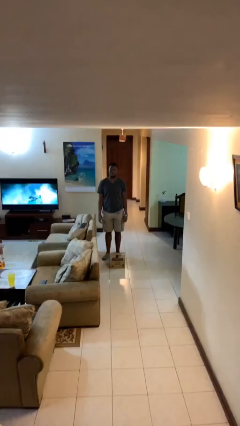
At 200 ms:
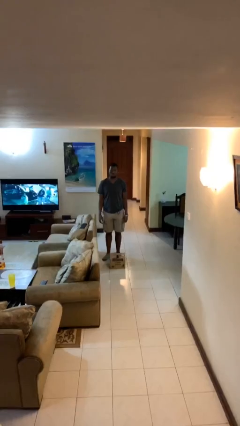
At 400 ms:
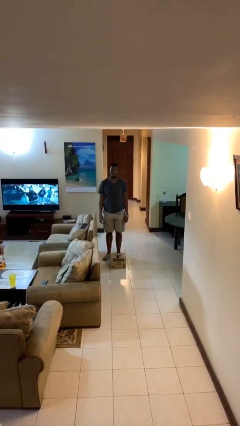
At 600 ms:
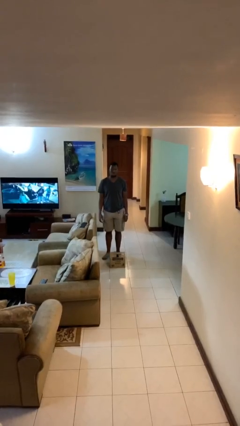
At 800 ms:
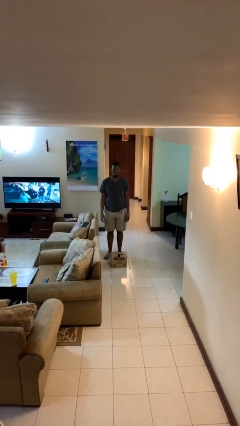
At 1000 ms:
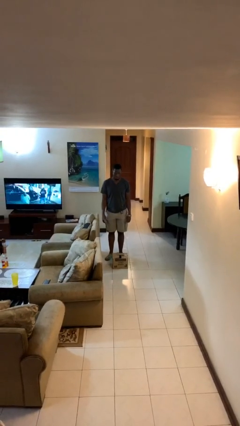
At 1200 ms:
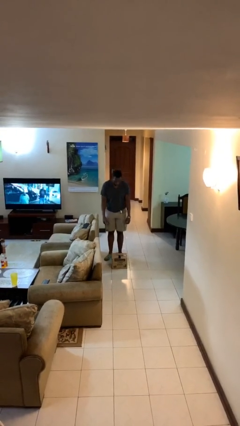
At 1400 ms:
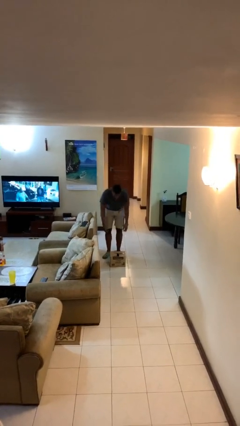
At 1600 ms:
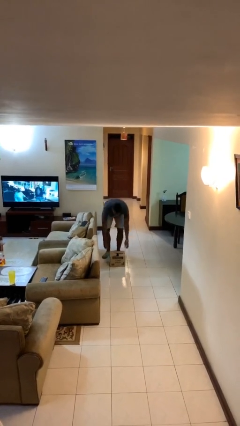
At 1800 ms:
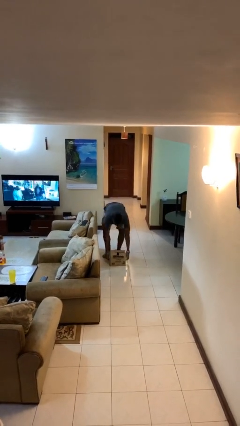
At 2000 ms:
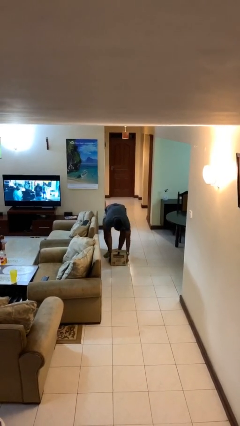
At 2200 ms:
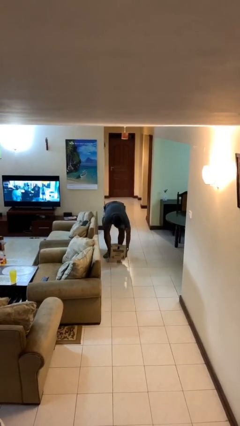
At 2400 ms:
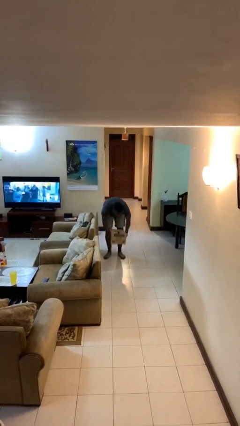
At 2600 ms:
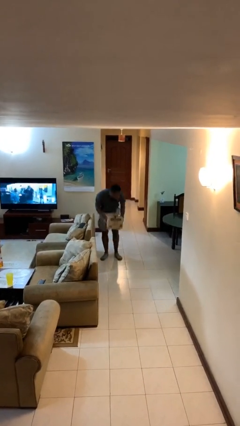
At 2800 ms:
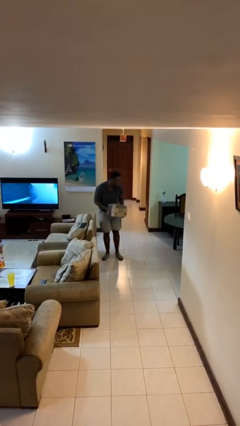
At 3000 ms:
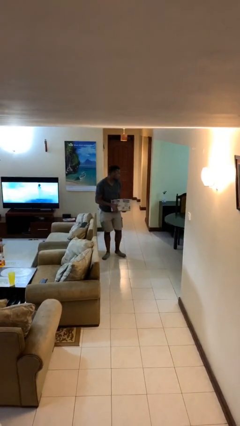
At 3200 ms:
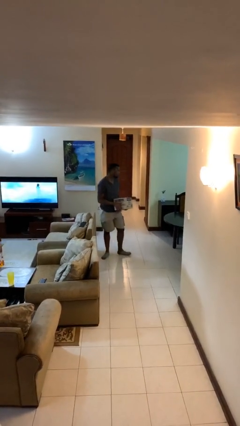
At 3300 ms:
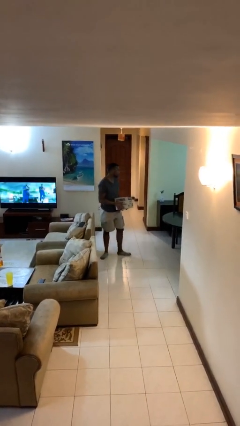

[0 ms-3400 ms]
person picks up object from floor

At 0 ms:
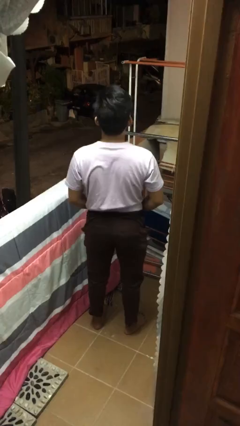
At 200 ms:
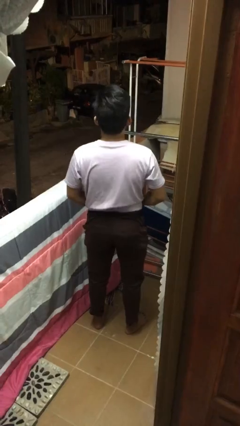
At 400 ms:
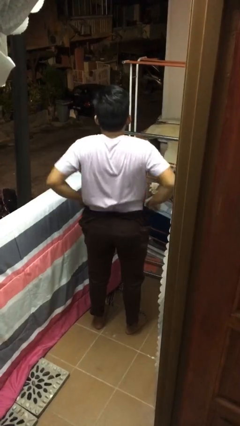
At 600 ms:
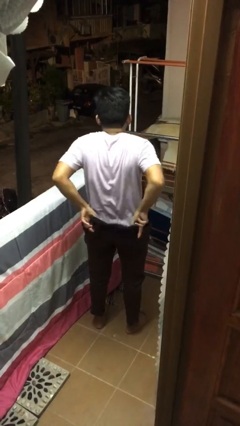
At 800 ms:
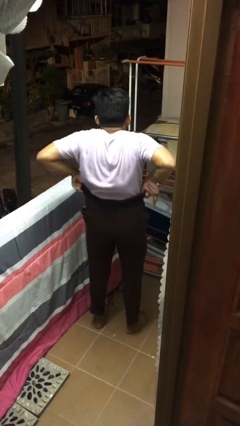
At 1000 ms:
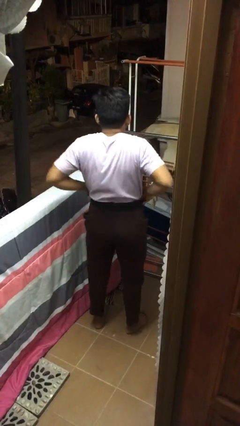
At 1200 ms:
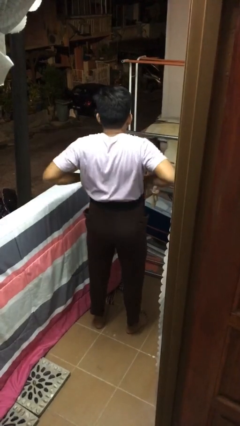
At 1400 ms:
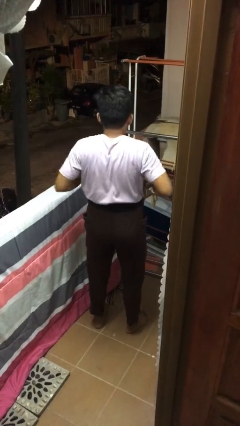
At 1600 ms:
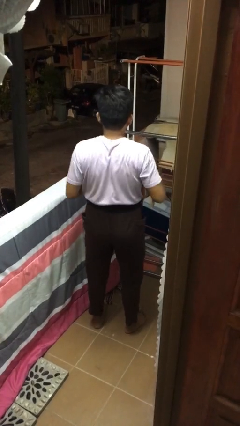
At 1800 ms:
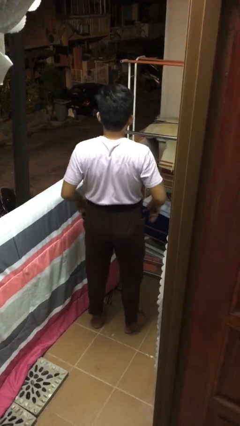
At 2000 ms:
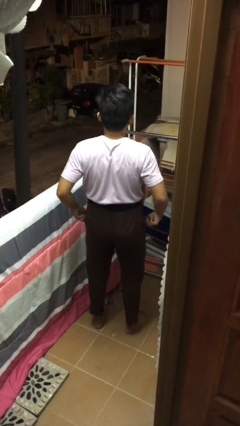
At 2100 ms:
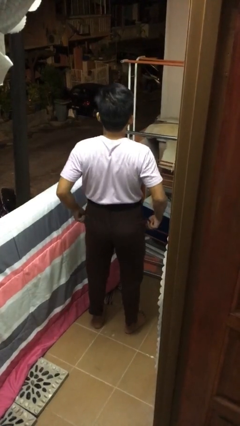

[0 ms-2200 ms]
person hikes up pants

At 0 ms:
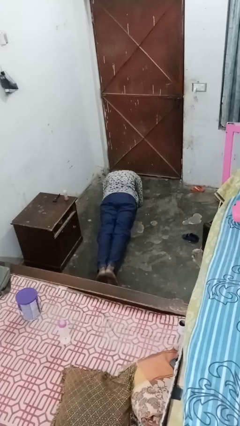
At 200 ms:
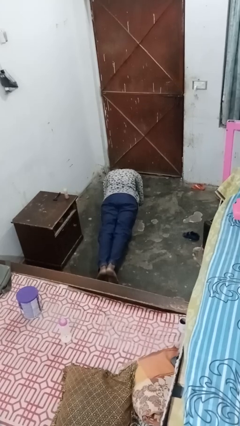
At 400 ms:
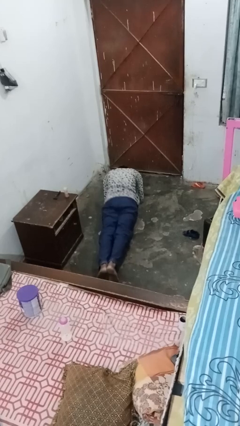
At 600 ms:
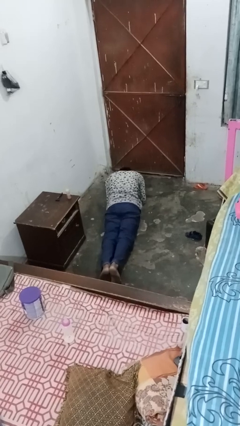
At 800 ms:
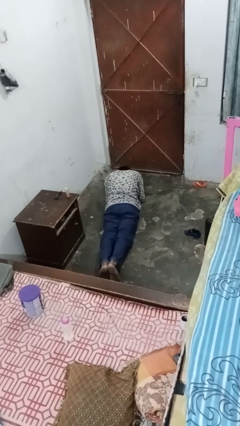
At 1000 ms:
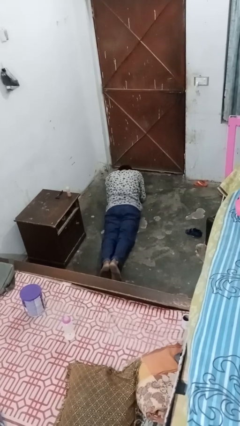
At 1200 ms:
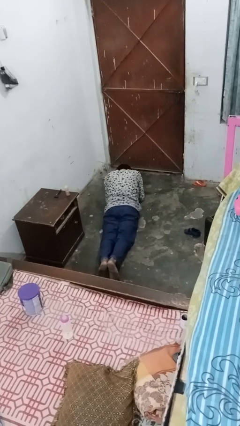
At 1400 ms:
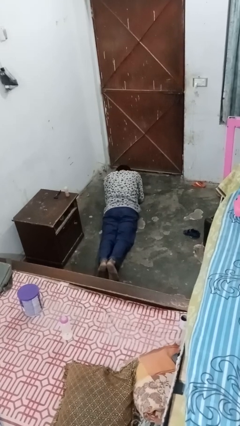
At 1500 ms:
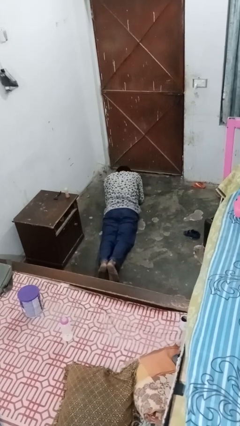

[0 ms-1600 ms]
person stands up from floor

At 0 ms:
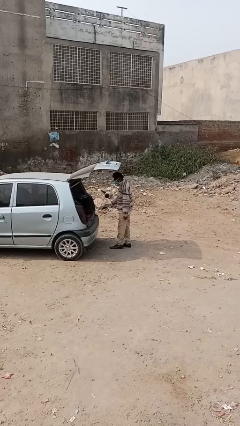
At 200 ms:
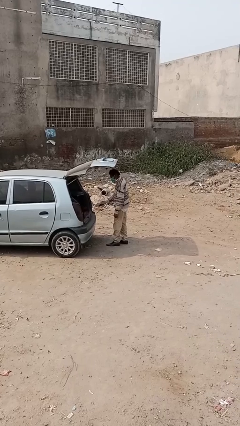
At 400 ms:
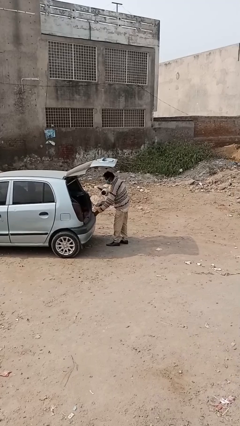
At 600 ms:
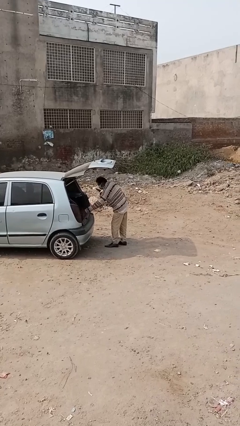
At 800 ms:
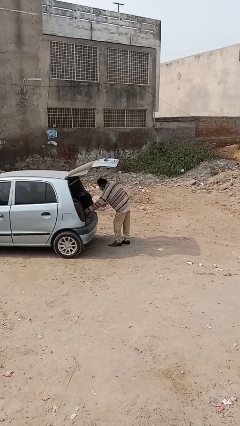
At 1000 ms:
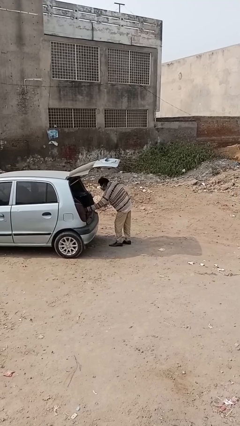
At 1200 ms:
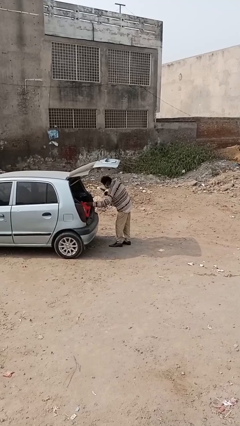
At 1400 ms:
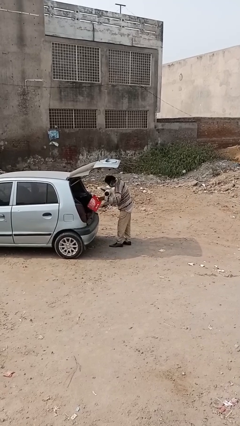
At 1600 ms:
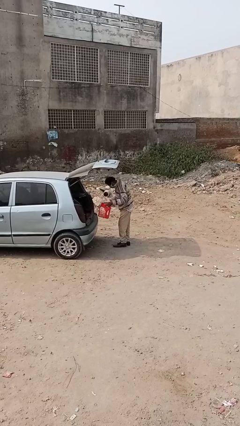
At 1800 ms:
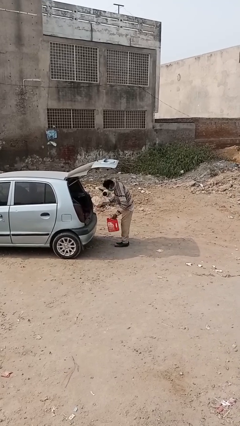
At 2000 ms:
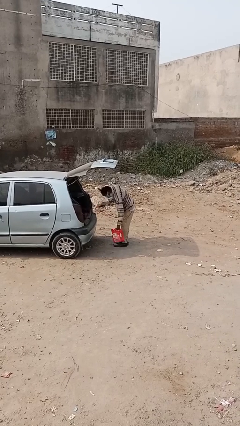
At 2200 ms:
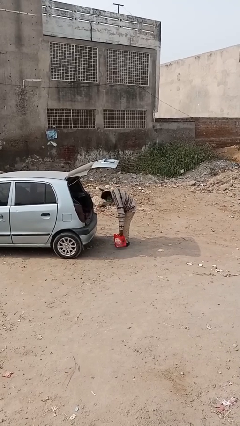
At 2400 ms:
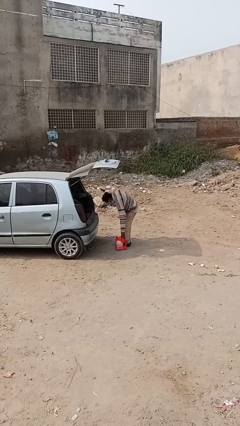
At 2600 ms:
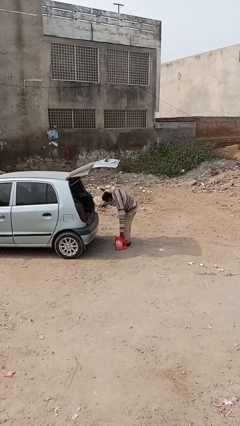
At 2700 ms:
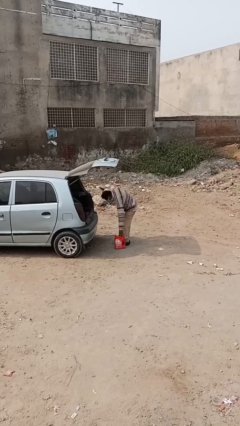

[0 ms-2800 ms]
person unloads car

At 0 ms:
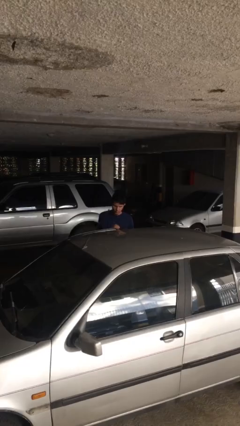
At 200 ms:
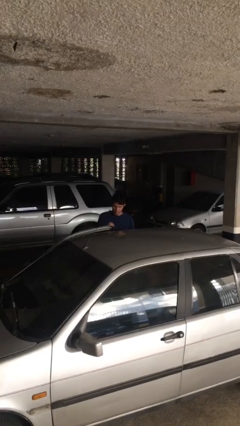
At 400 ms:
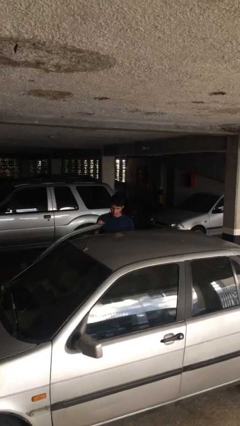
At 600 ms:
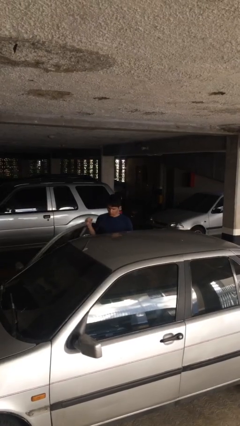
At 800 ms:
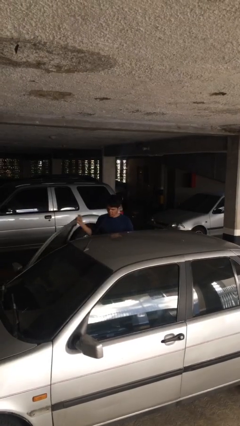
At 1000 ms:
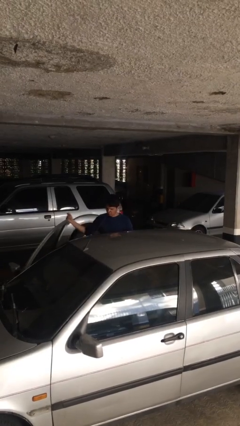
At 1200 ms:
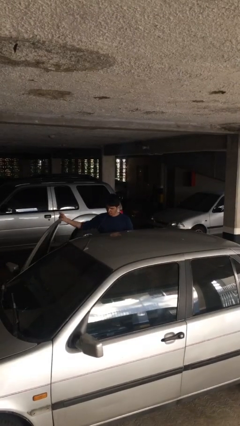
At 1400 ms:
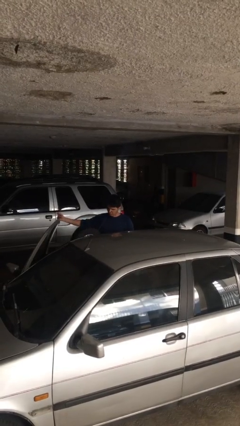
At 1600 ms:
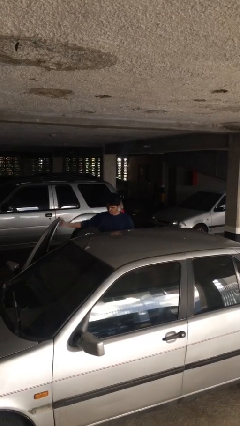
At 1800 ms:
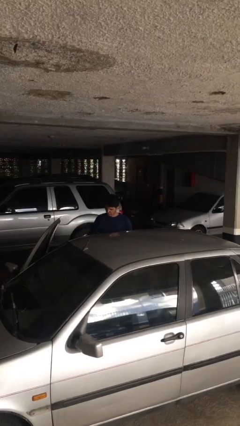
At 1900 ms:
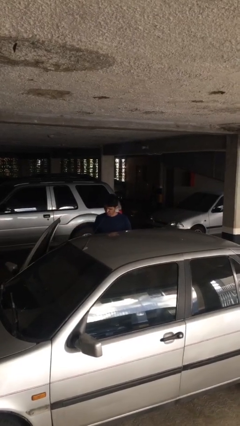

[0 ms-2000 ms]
person opens car door

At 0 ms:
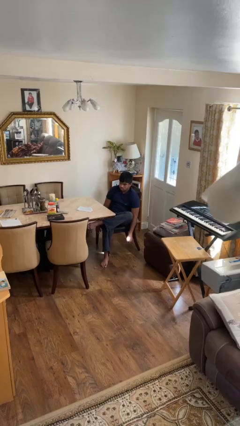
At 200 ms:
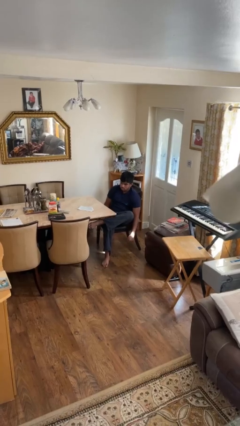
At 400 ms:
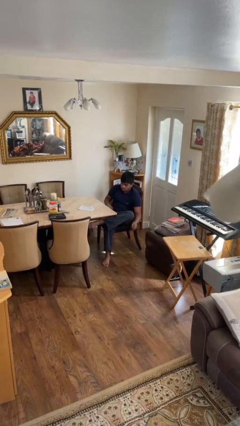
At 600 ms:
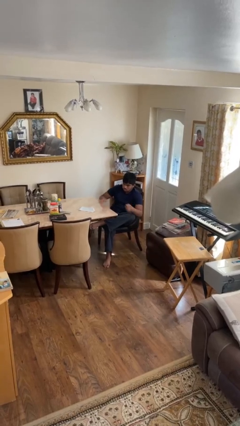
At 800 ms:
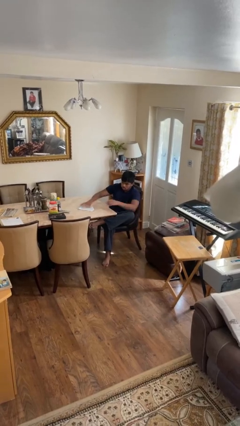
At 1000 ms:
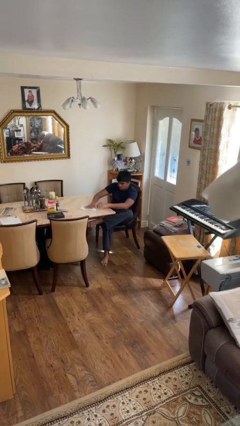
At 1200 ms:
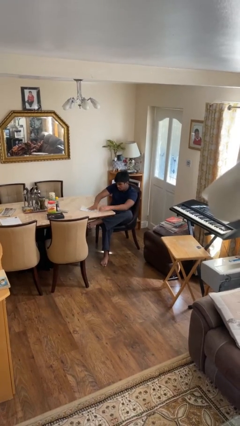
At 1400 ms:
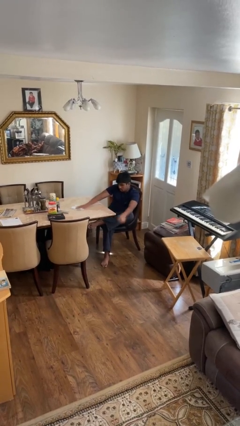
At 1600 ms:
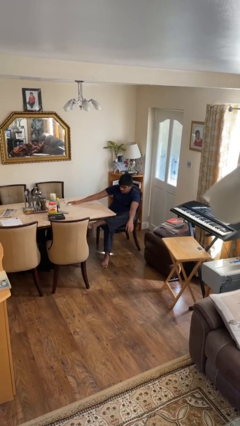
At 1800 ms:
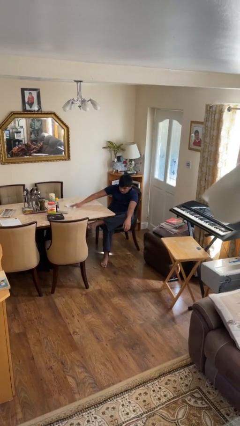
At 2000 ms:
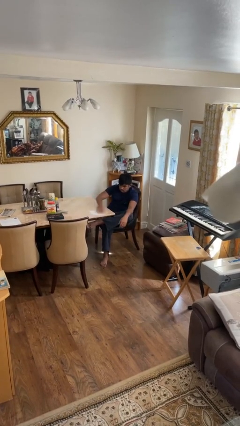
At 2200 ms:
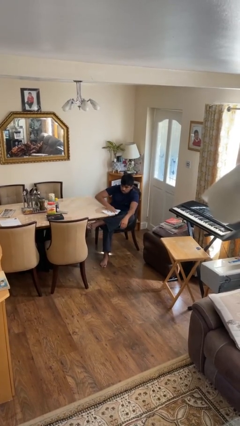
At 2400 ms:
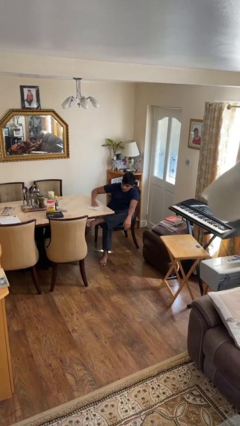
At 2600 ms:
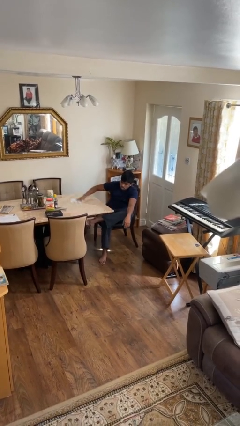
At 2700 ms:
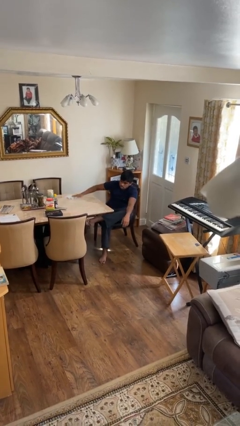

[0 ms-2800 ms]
person cleans table with rag

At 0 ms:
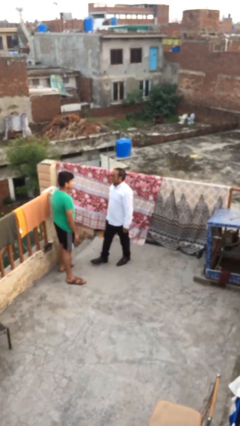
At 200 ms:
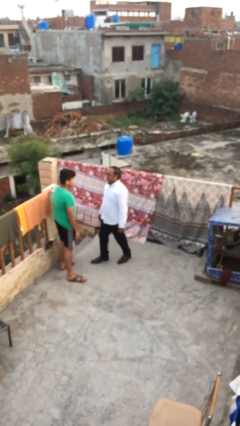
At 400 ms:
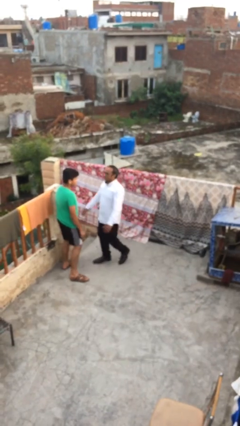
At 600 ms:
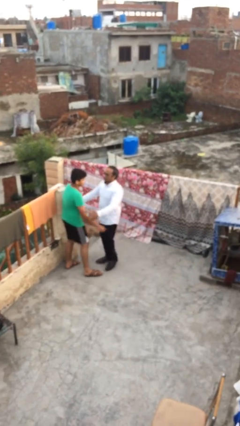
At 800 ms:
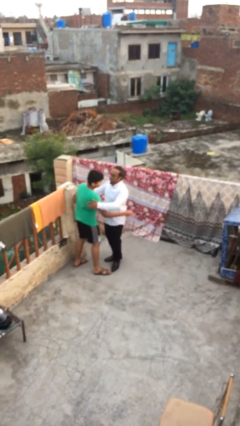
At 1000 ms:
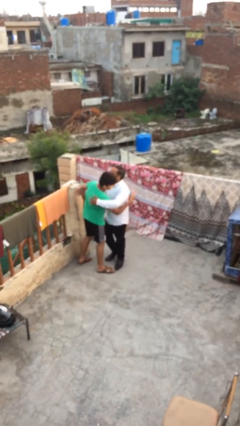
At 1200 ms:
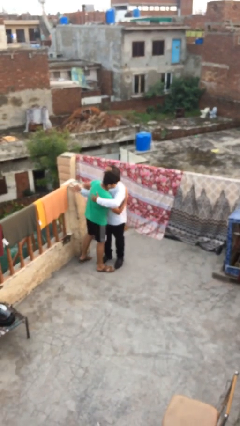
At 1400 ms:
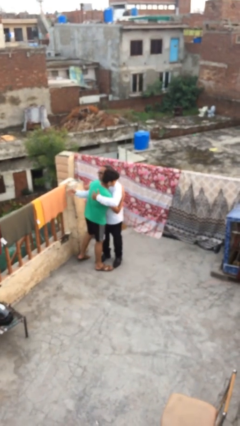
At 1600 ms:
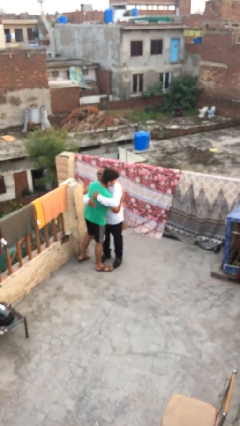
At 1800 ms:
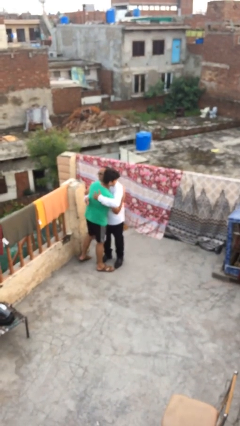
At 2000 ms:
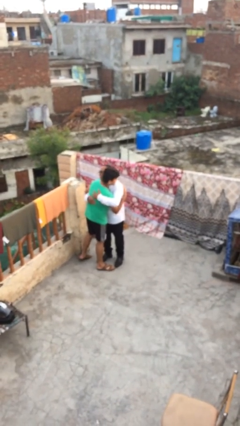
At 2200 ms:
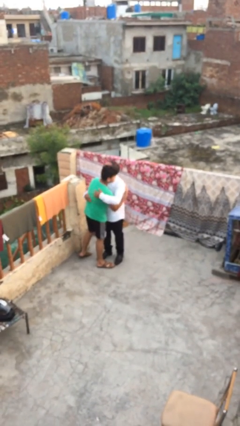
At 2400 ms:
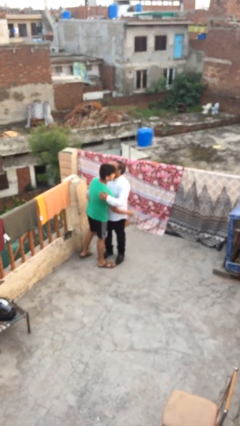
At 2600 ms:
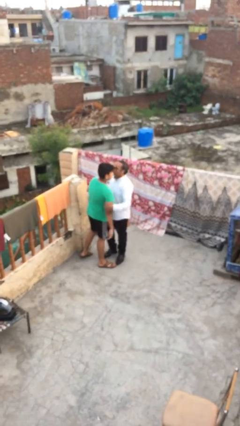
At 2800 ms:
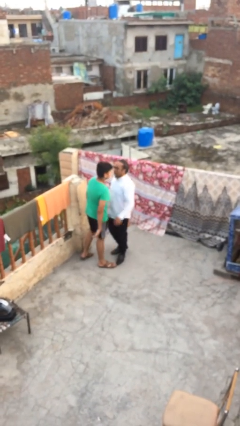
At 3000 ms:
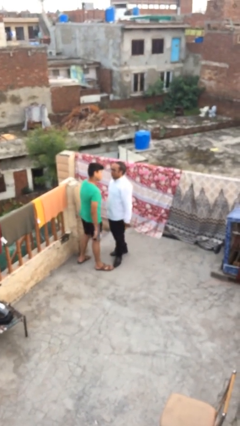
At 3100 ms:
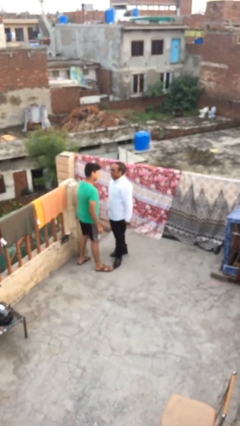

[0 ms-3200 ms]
person embraces person
